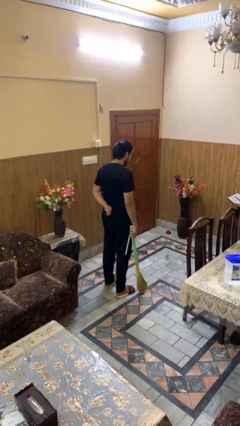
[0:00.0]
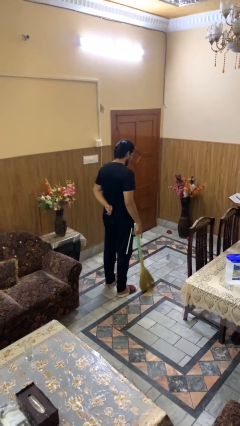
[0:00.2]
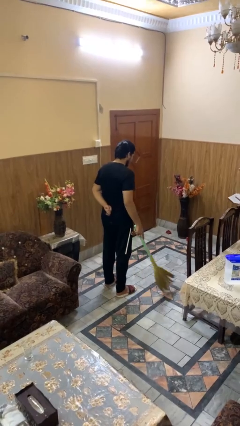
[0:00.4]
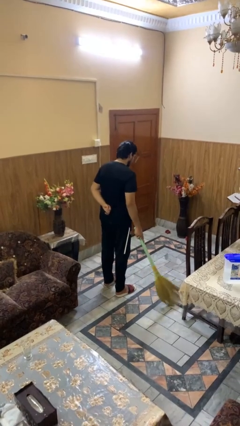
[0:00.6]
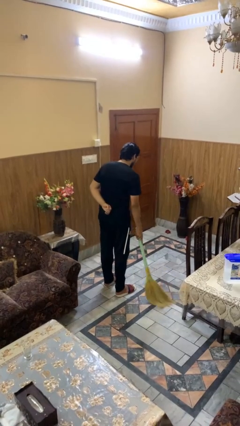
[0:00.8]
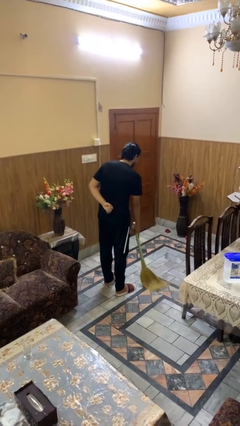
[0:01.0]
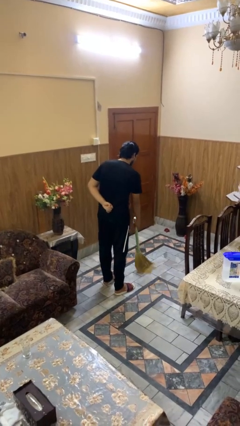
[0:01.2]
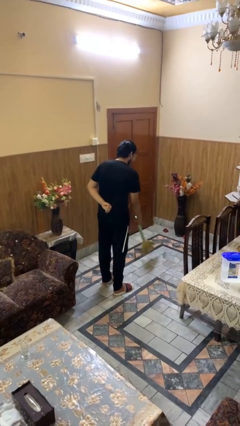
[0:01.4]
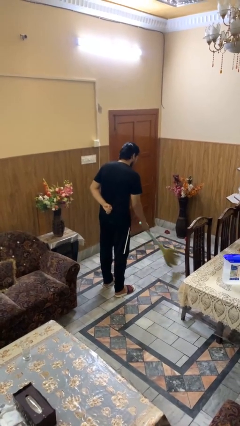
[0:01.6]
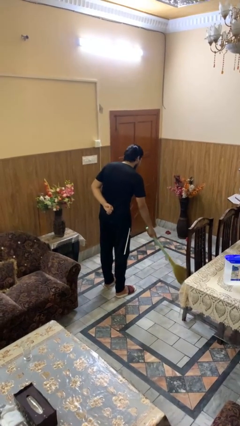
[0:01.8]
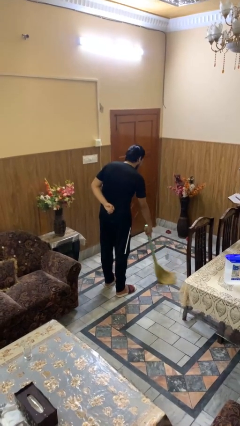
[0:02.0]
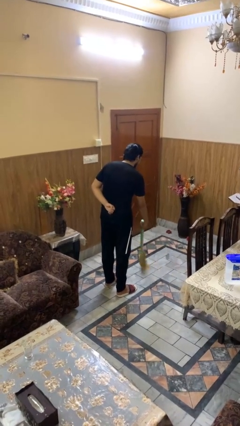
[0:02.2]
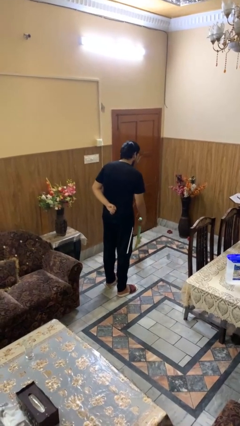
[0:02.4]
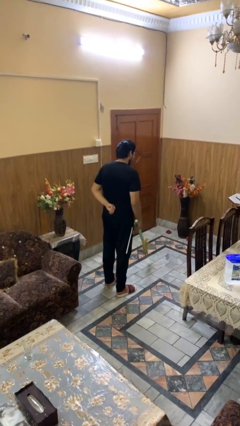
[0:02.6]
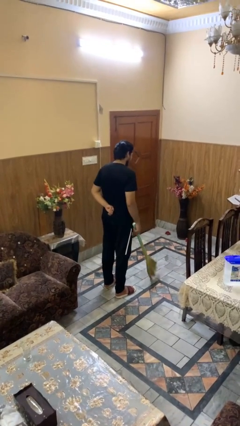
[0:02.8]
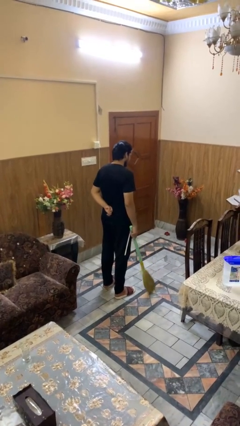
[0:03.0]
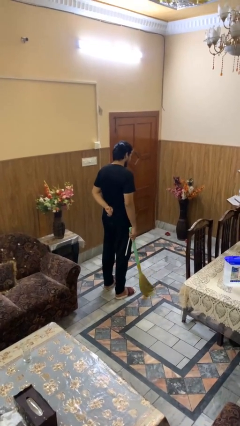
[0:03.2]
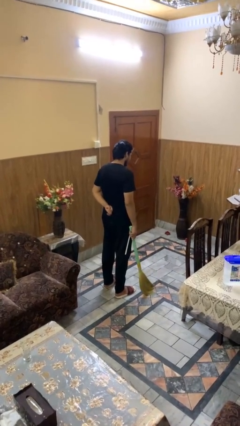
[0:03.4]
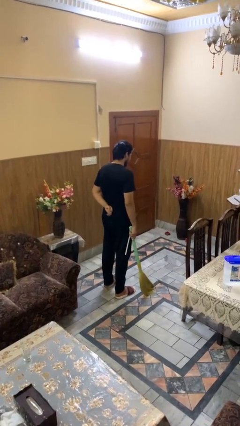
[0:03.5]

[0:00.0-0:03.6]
person sweeps floor

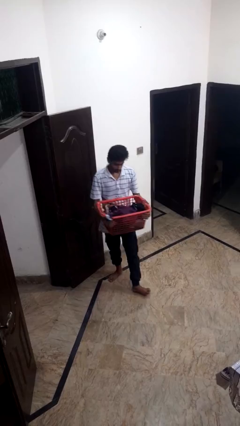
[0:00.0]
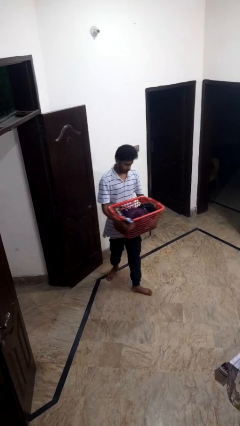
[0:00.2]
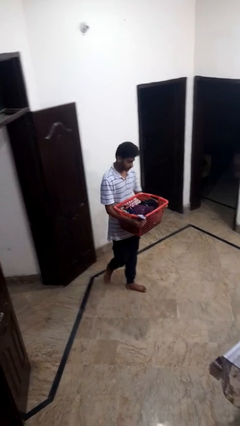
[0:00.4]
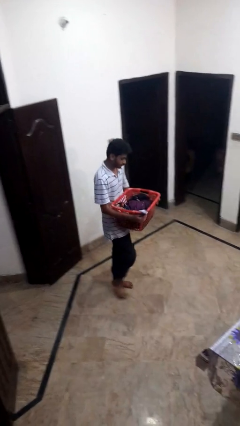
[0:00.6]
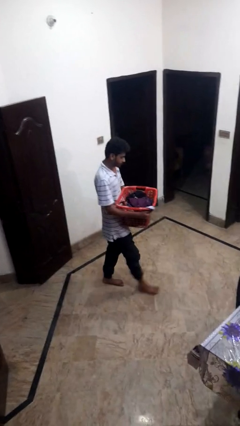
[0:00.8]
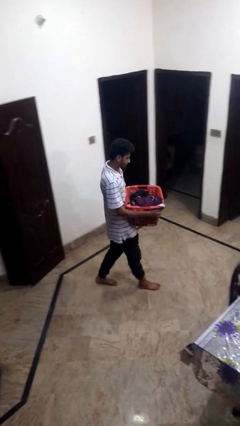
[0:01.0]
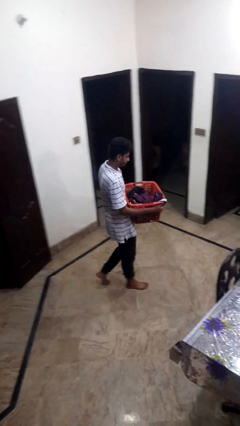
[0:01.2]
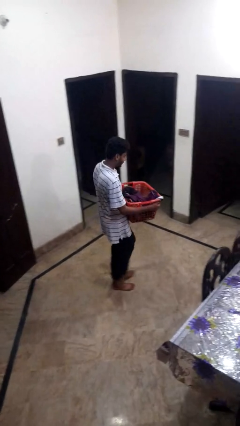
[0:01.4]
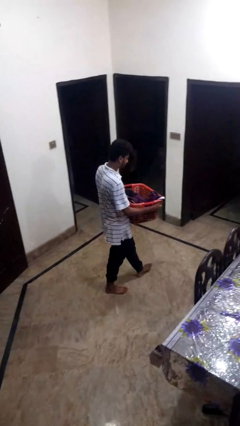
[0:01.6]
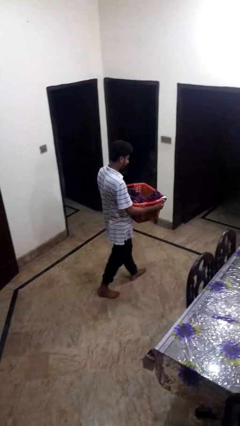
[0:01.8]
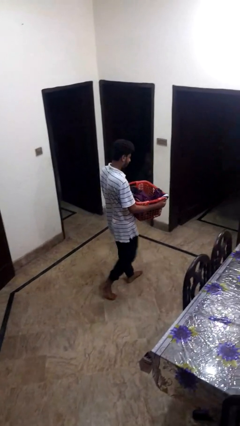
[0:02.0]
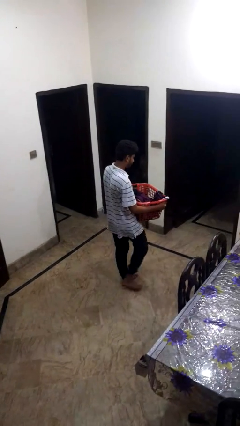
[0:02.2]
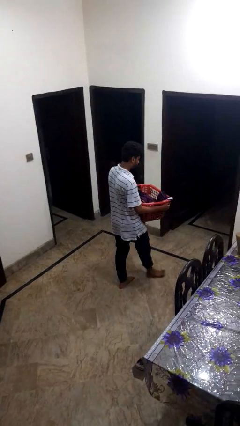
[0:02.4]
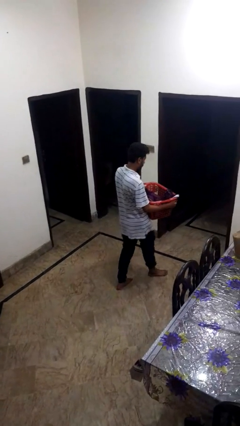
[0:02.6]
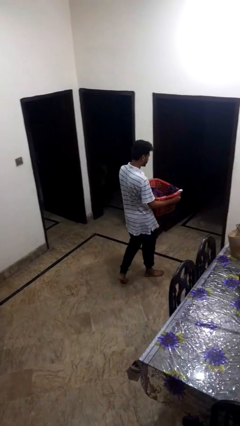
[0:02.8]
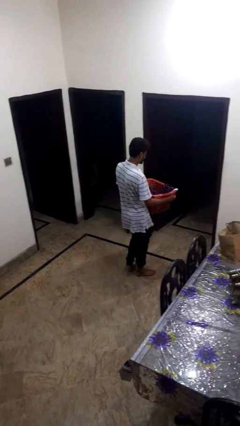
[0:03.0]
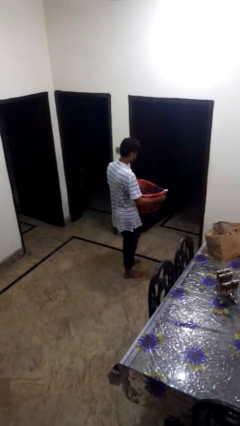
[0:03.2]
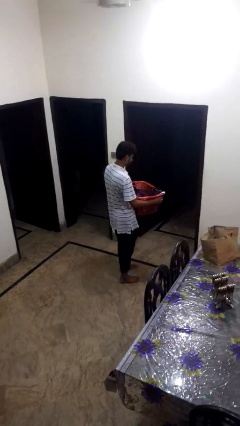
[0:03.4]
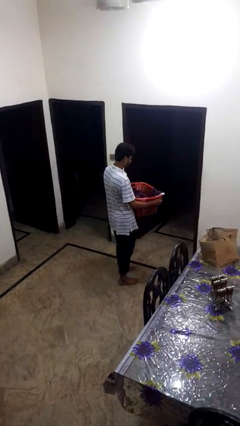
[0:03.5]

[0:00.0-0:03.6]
person carries laundry basket

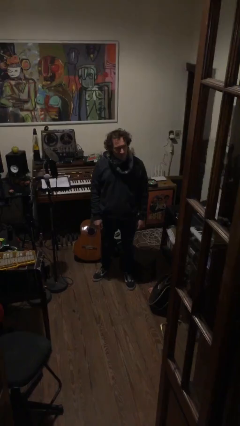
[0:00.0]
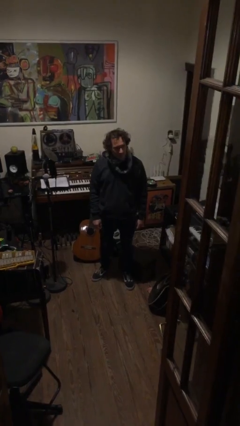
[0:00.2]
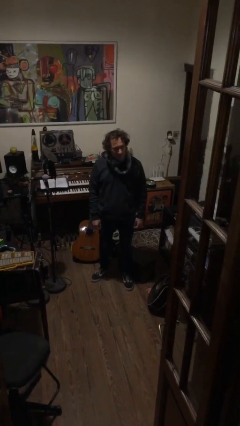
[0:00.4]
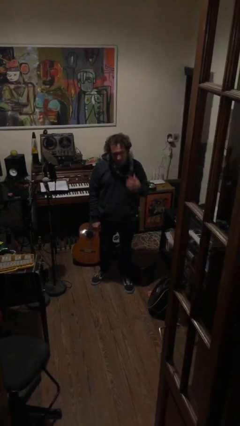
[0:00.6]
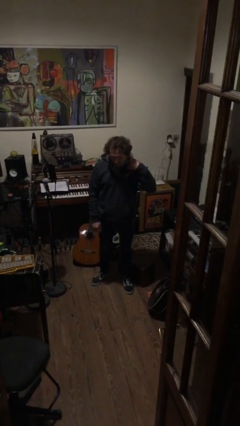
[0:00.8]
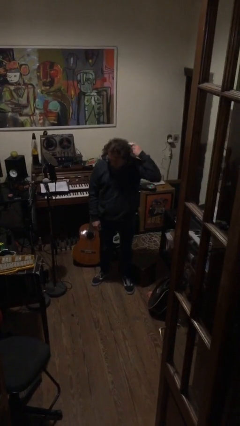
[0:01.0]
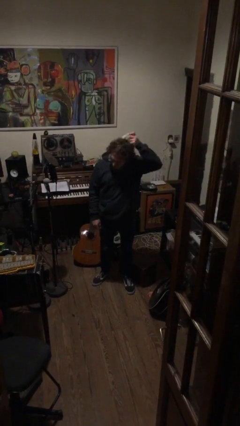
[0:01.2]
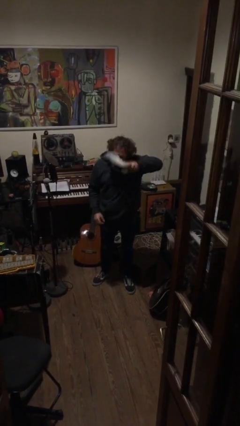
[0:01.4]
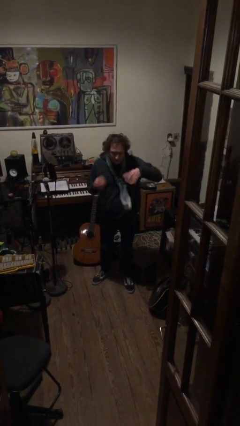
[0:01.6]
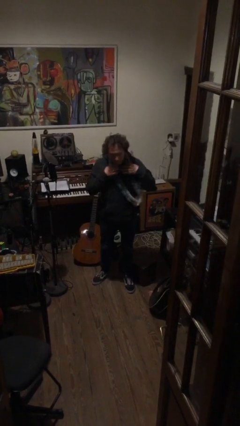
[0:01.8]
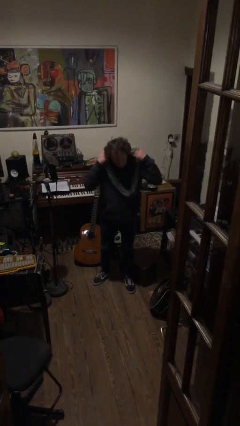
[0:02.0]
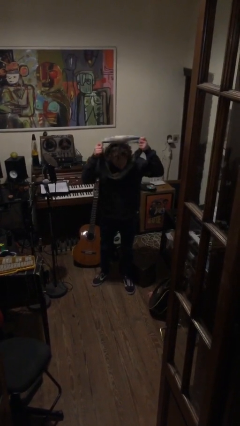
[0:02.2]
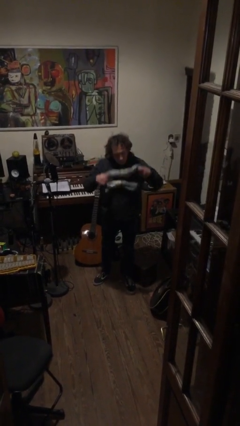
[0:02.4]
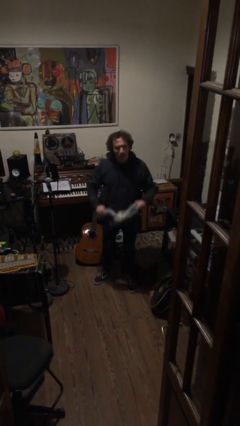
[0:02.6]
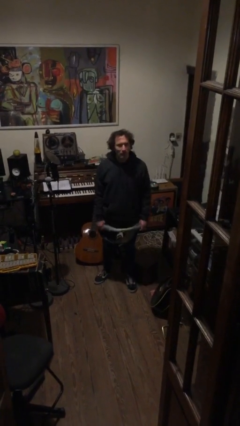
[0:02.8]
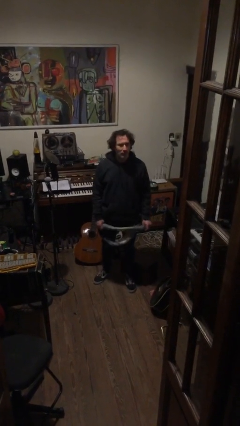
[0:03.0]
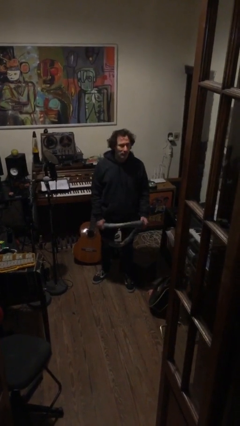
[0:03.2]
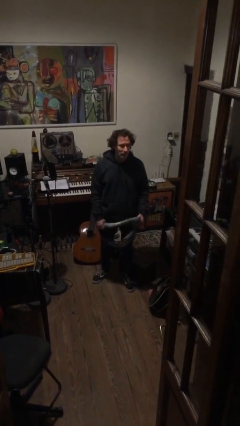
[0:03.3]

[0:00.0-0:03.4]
person takes off scarf

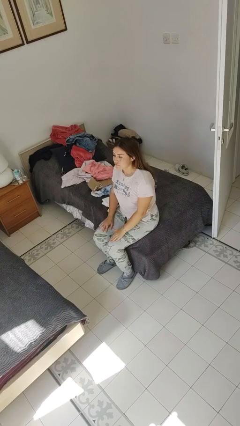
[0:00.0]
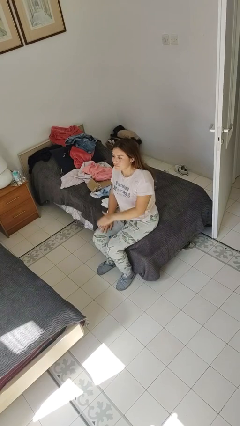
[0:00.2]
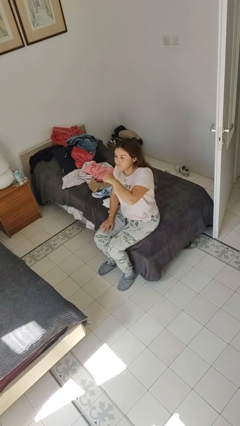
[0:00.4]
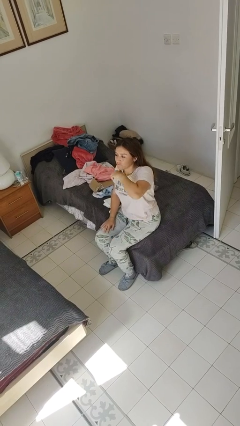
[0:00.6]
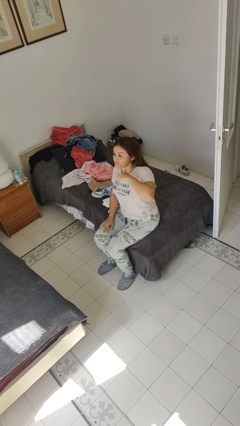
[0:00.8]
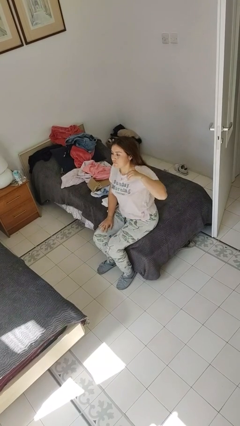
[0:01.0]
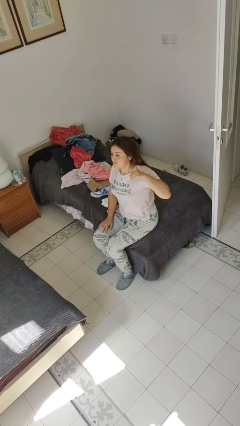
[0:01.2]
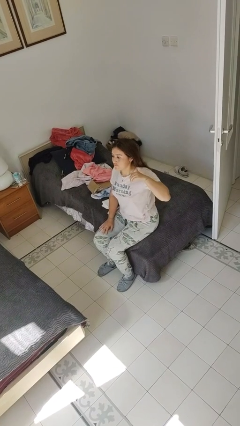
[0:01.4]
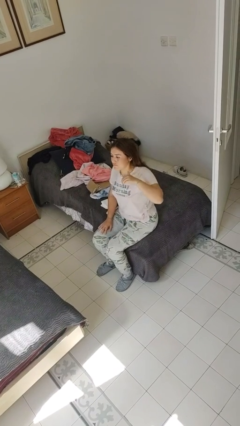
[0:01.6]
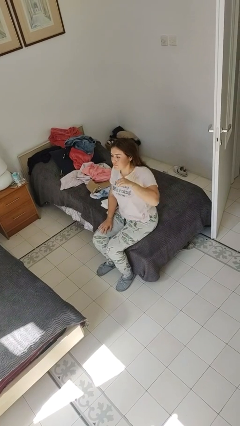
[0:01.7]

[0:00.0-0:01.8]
person gestures cut

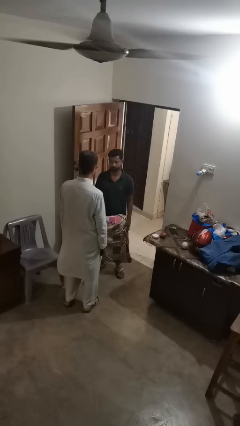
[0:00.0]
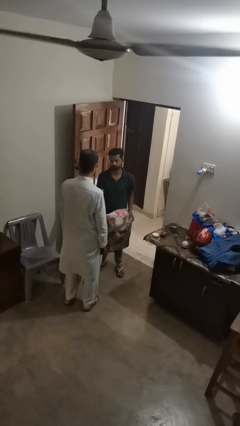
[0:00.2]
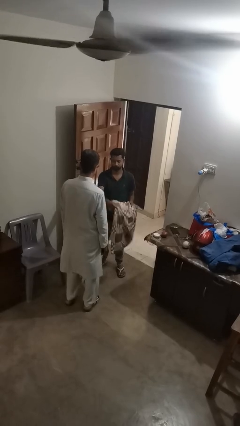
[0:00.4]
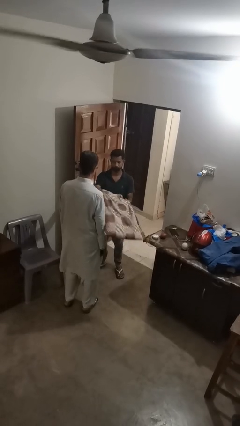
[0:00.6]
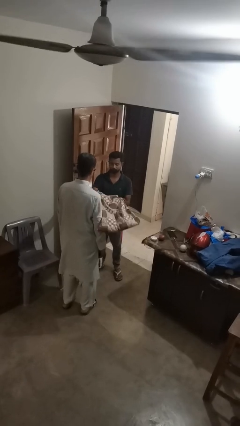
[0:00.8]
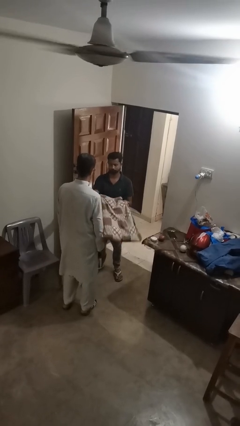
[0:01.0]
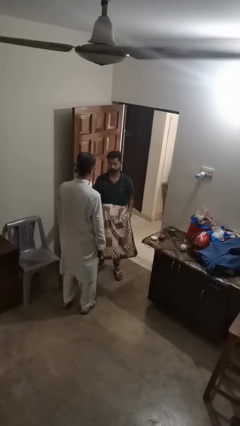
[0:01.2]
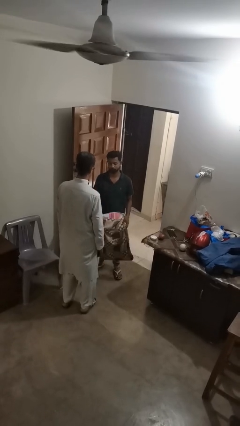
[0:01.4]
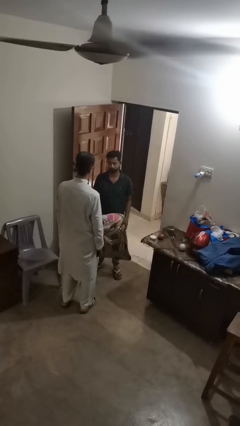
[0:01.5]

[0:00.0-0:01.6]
person hits person with pillow

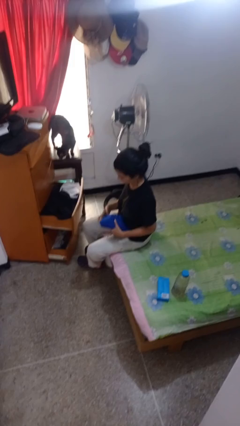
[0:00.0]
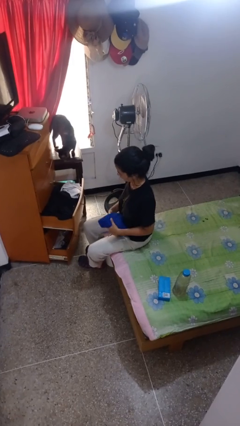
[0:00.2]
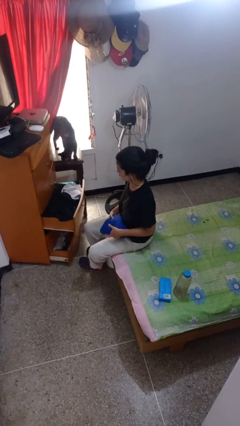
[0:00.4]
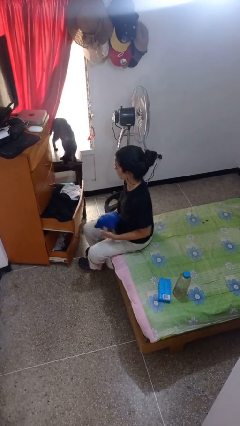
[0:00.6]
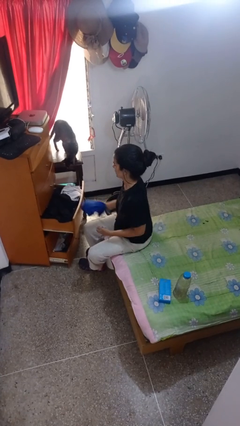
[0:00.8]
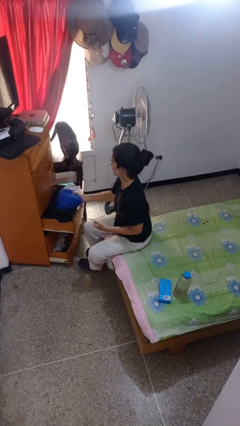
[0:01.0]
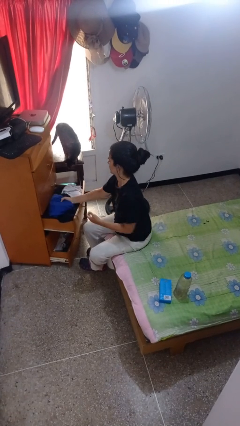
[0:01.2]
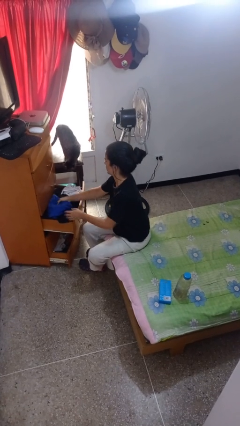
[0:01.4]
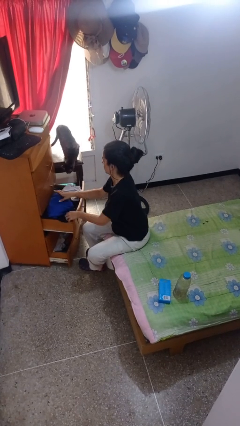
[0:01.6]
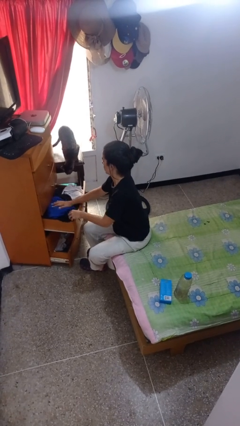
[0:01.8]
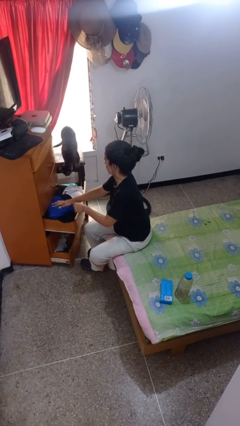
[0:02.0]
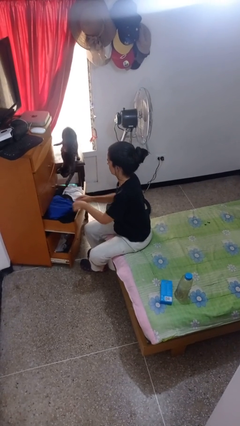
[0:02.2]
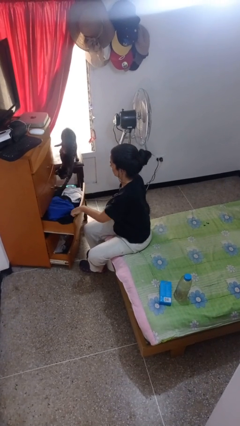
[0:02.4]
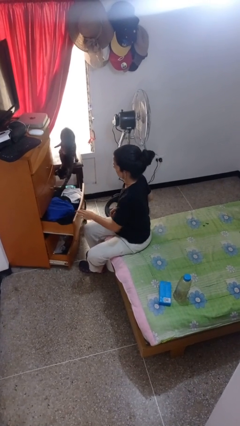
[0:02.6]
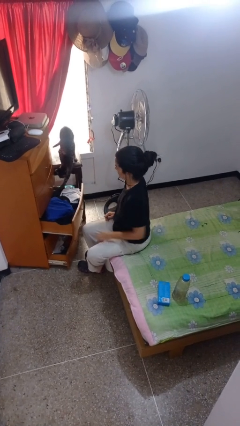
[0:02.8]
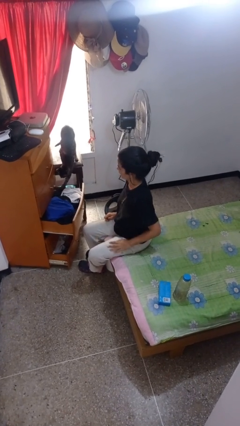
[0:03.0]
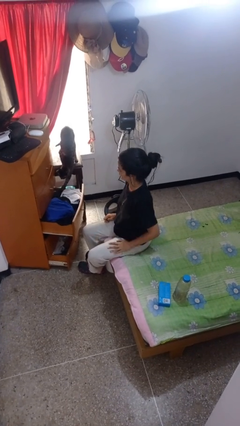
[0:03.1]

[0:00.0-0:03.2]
person puts clothes into dresser

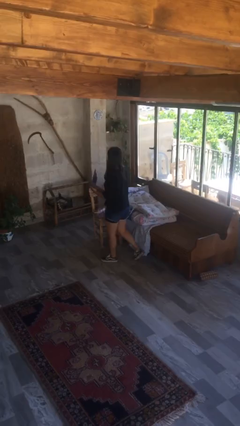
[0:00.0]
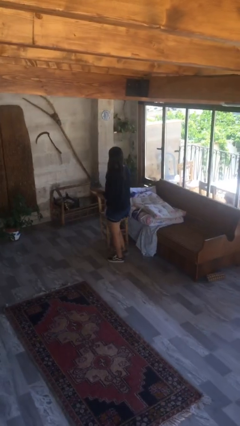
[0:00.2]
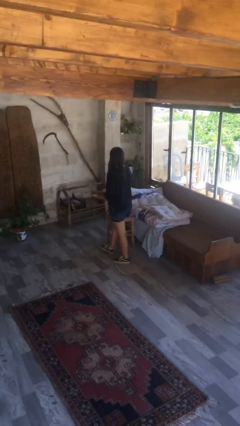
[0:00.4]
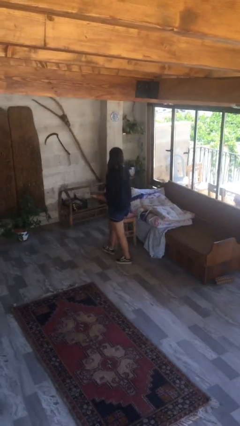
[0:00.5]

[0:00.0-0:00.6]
person sits down
